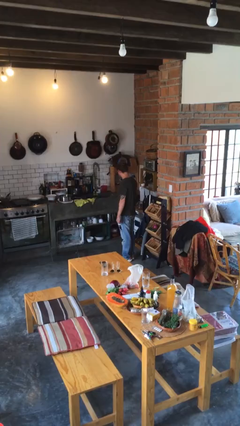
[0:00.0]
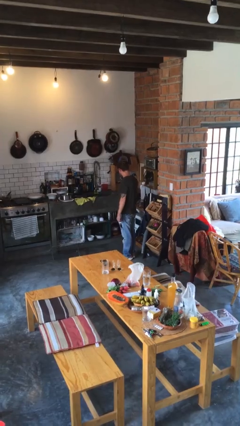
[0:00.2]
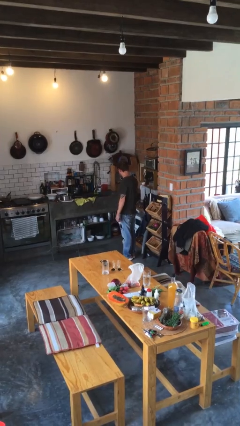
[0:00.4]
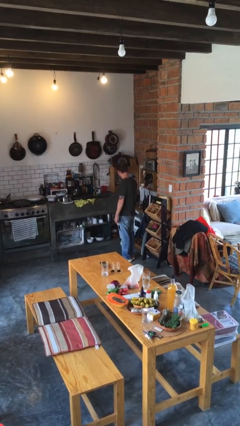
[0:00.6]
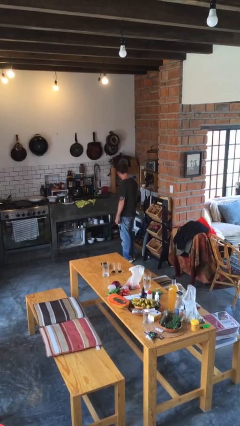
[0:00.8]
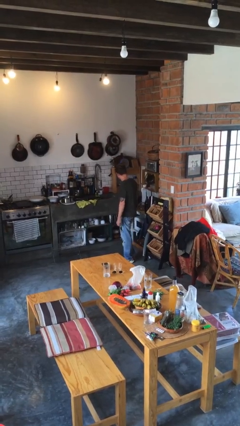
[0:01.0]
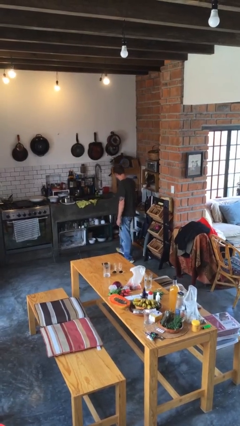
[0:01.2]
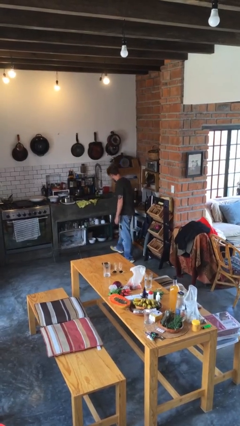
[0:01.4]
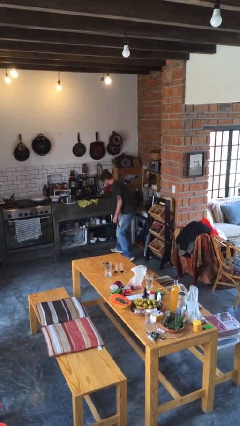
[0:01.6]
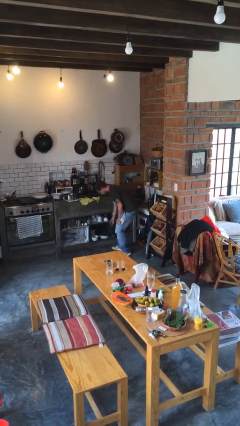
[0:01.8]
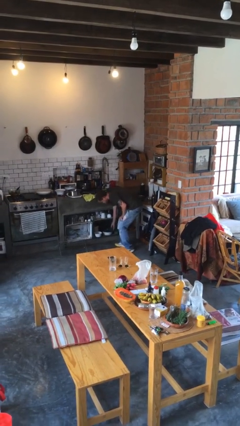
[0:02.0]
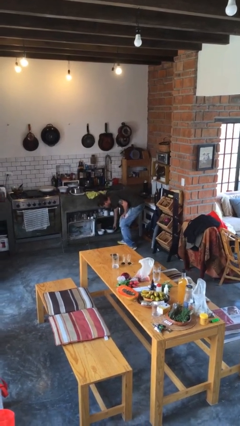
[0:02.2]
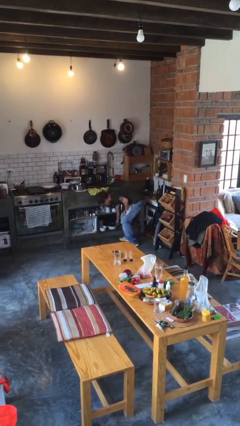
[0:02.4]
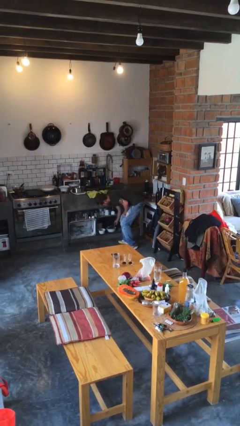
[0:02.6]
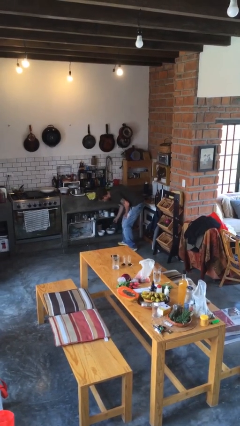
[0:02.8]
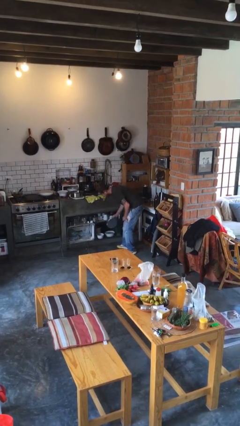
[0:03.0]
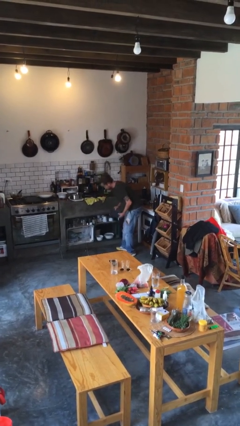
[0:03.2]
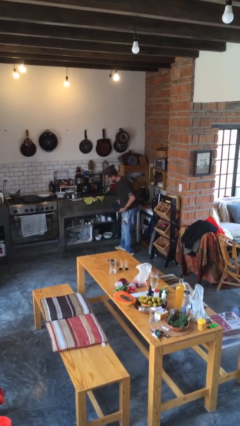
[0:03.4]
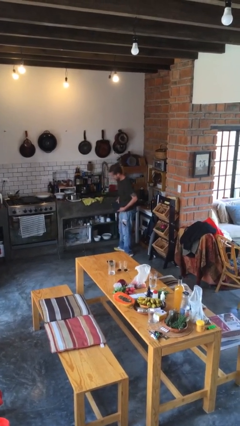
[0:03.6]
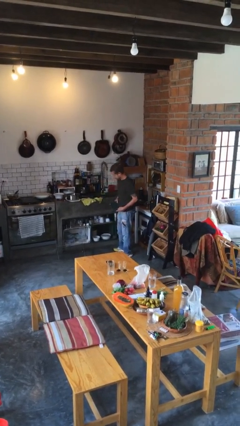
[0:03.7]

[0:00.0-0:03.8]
person picks up object from cabinet

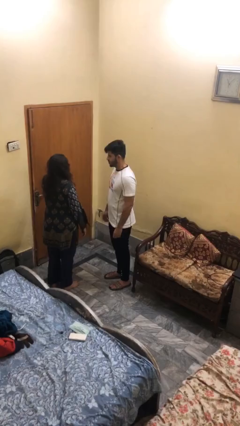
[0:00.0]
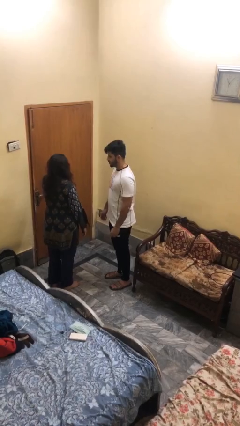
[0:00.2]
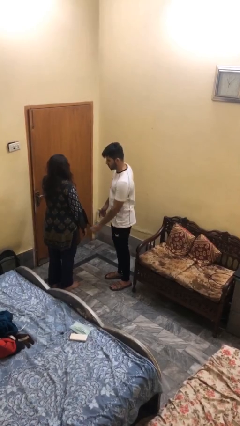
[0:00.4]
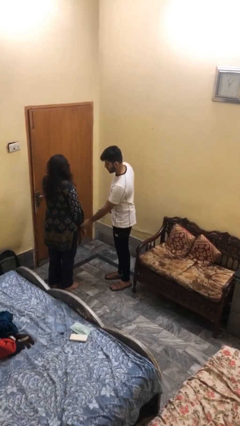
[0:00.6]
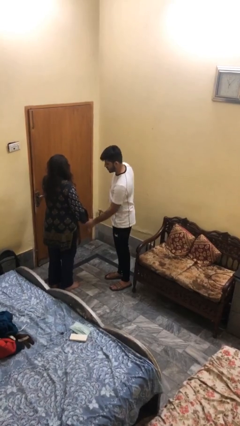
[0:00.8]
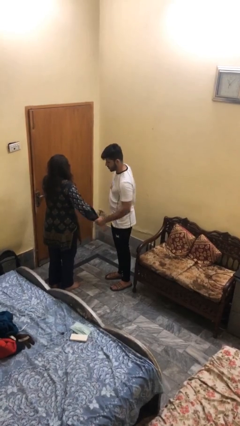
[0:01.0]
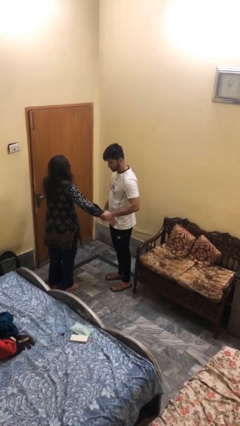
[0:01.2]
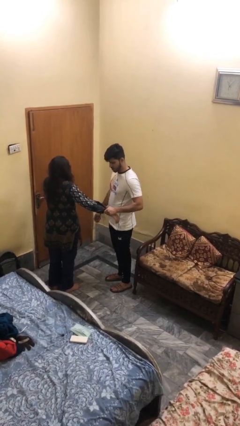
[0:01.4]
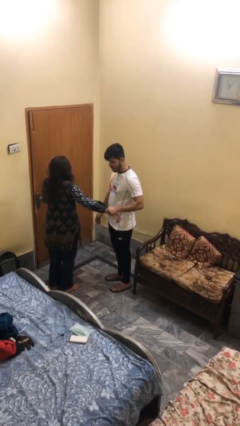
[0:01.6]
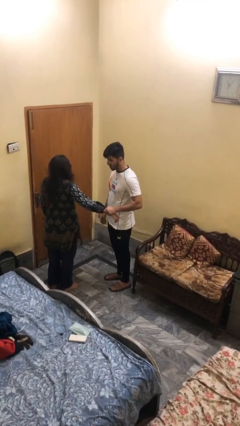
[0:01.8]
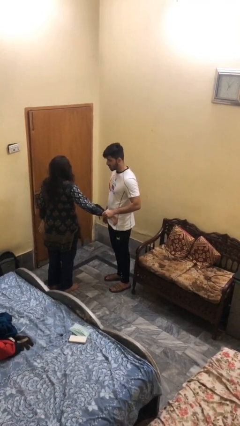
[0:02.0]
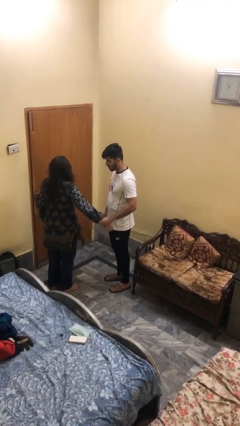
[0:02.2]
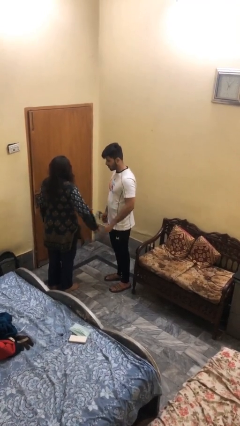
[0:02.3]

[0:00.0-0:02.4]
person grabs person by forearm

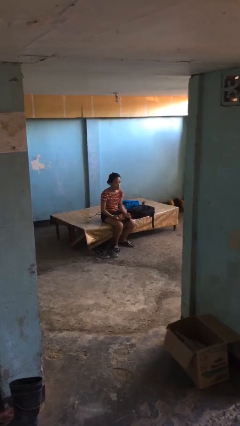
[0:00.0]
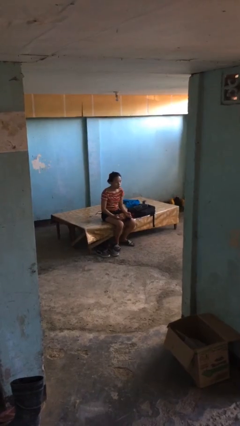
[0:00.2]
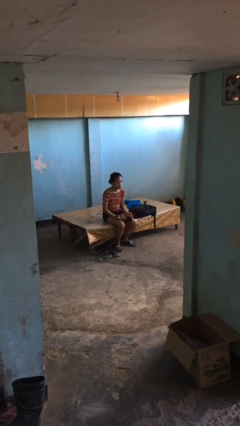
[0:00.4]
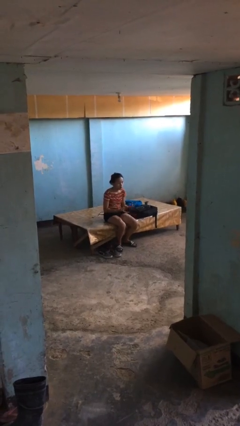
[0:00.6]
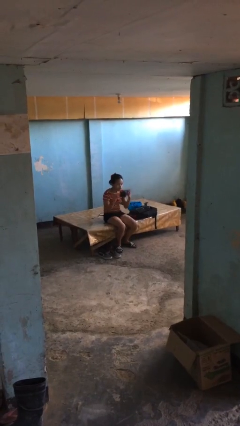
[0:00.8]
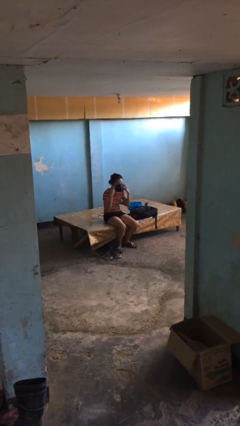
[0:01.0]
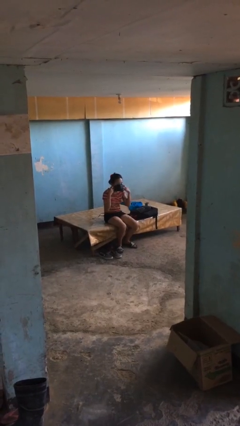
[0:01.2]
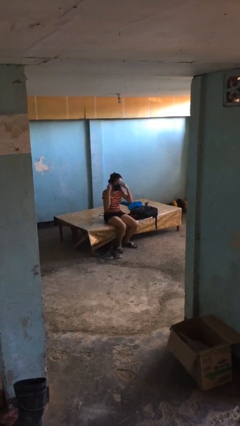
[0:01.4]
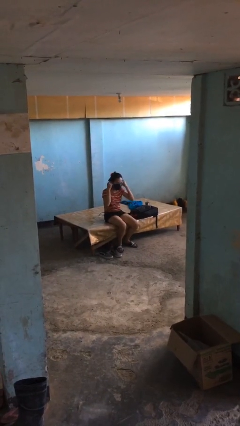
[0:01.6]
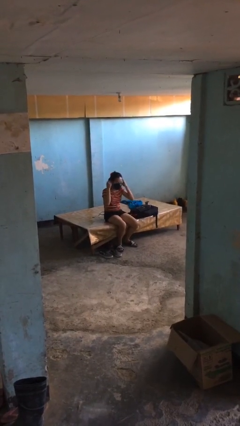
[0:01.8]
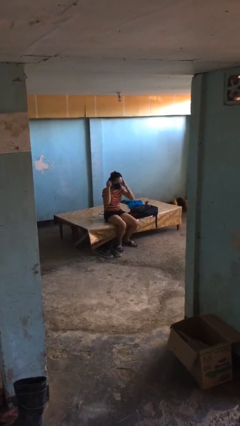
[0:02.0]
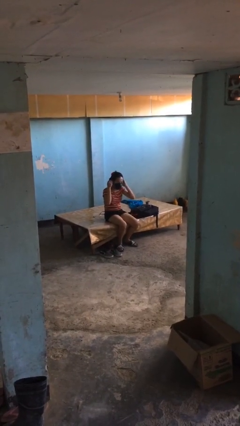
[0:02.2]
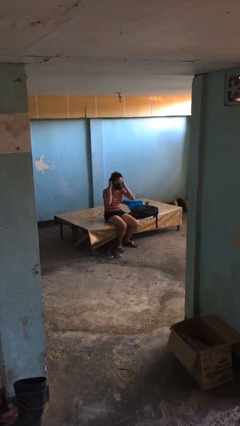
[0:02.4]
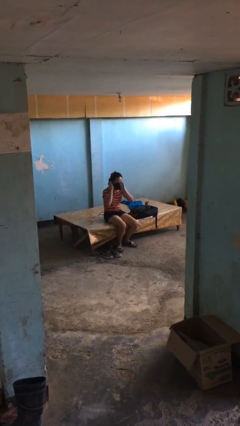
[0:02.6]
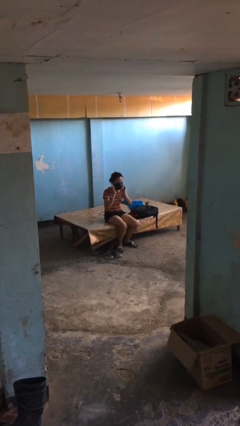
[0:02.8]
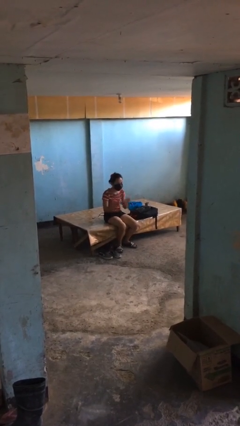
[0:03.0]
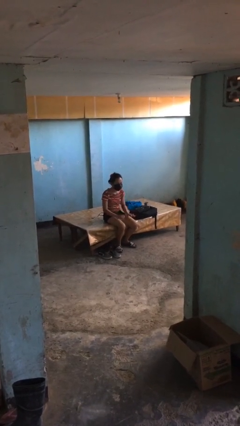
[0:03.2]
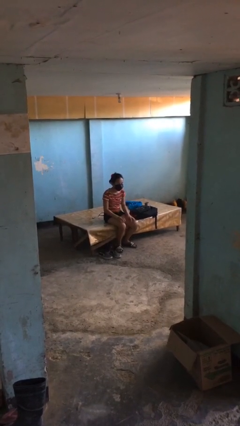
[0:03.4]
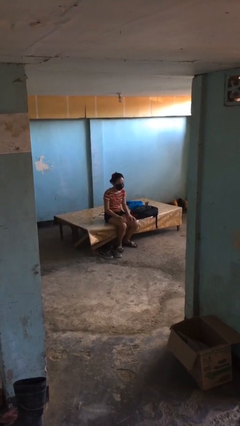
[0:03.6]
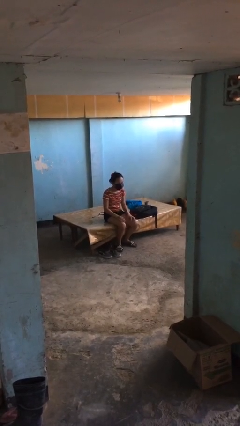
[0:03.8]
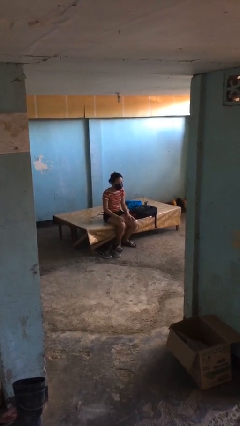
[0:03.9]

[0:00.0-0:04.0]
person puts on facemask

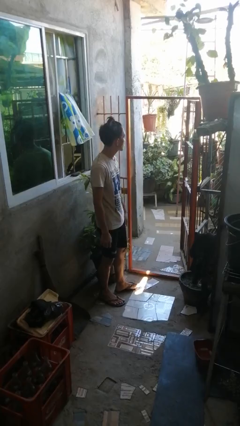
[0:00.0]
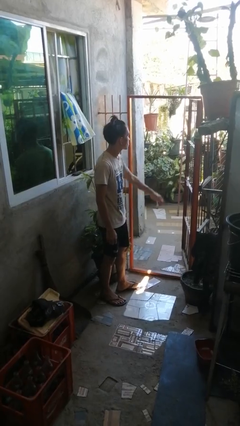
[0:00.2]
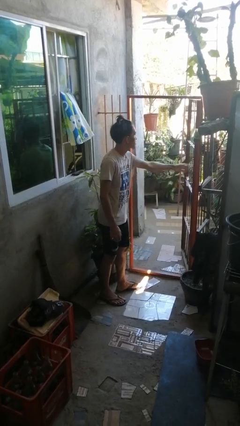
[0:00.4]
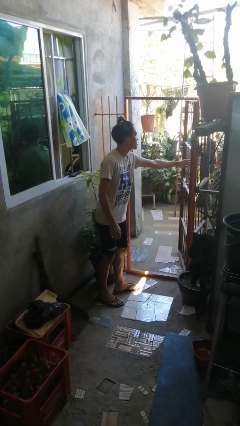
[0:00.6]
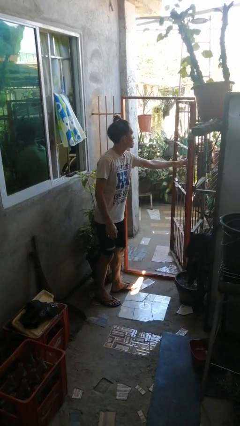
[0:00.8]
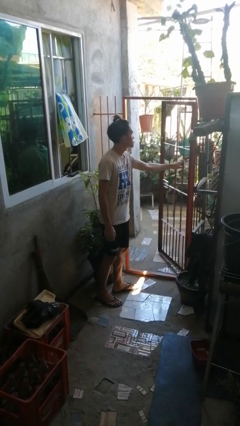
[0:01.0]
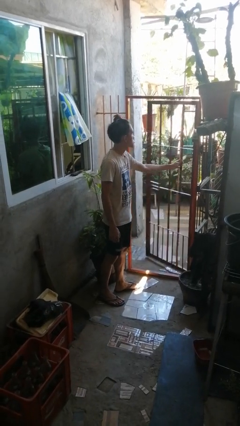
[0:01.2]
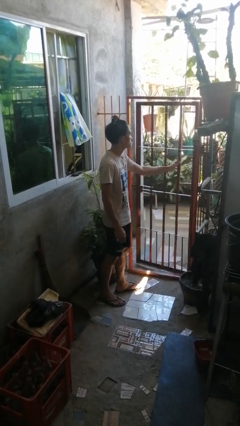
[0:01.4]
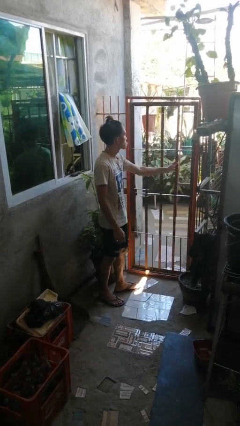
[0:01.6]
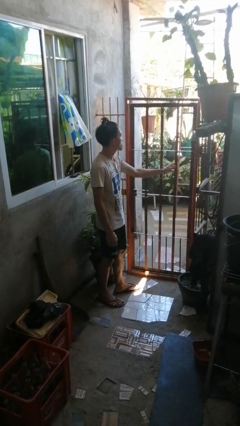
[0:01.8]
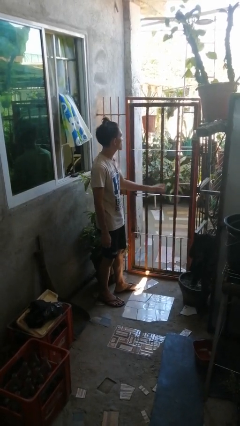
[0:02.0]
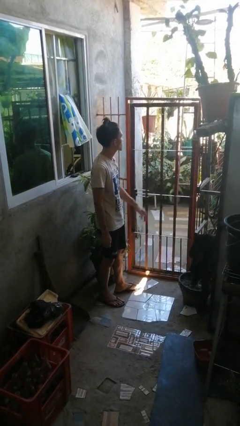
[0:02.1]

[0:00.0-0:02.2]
person closes gate

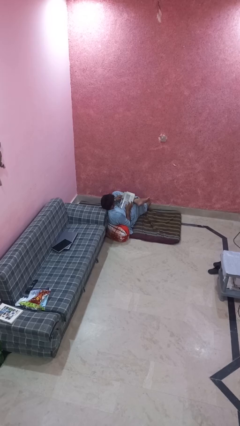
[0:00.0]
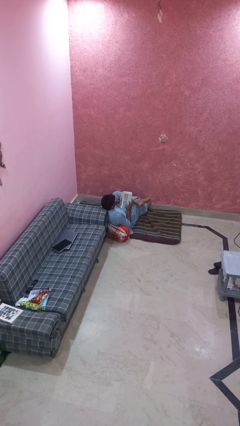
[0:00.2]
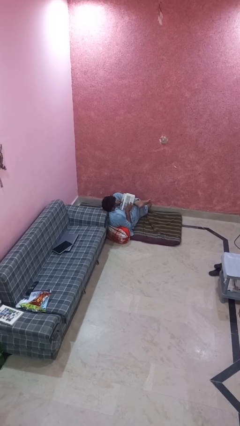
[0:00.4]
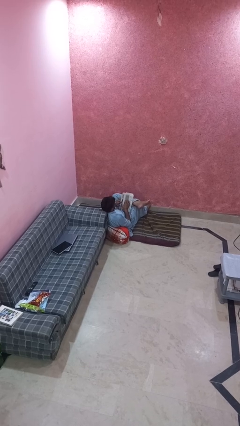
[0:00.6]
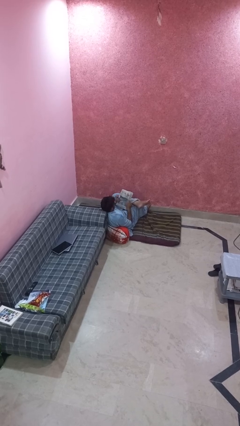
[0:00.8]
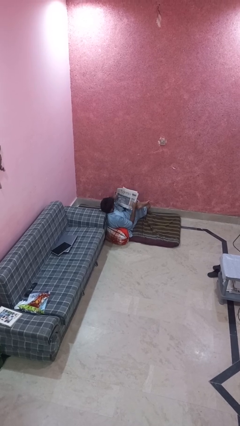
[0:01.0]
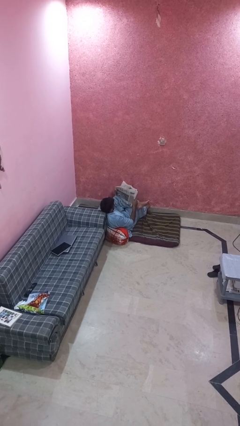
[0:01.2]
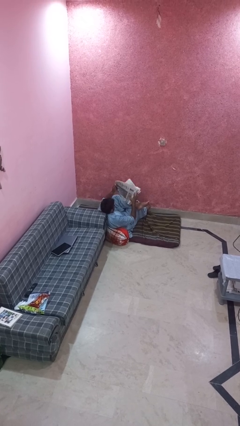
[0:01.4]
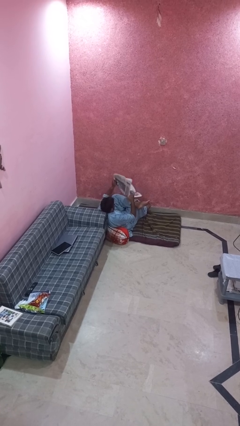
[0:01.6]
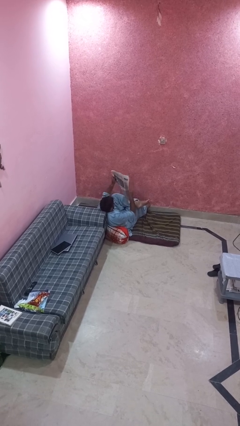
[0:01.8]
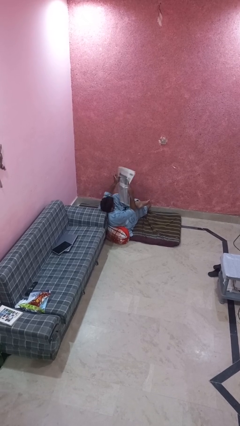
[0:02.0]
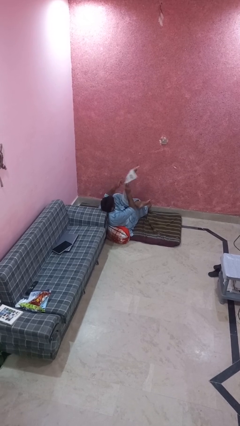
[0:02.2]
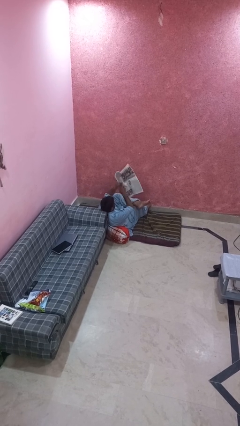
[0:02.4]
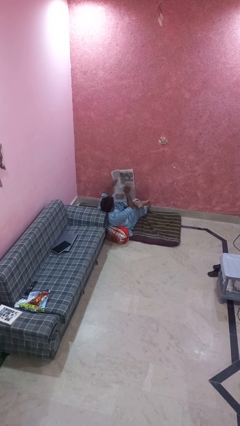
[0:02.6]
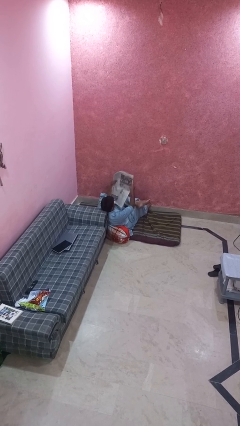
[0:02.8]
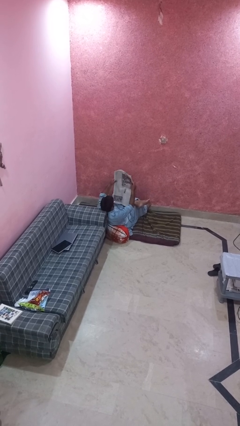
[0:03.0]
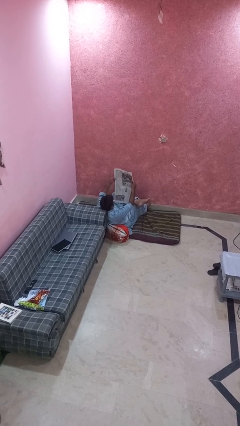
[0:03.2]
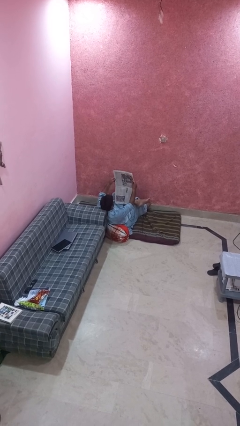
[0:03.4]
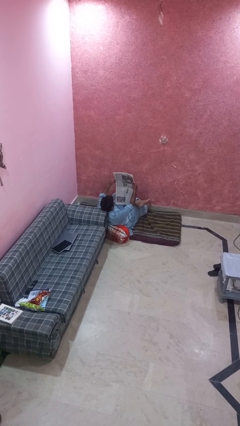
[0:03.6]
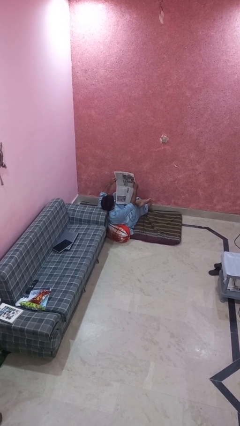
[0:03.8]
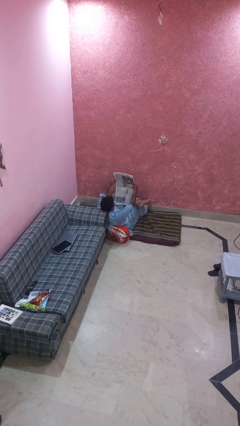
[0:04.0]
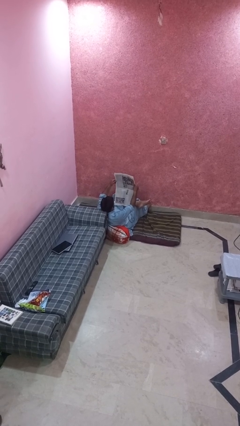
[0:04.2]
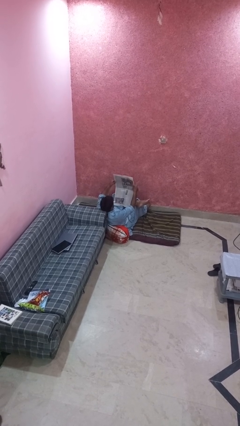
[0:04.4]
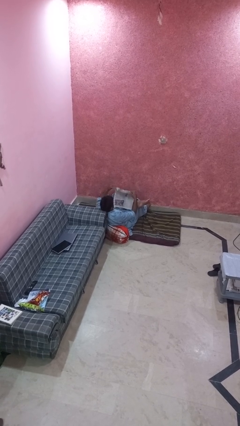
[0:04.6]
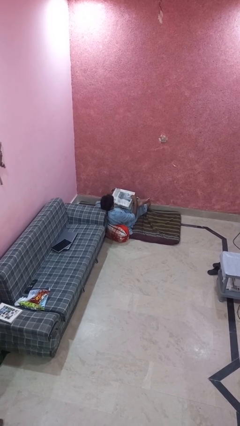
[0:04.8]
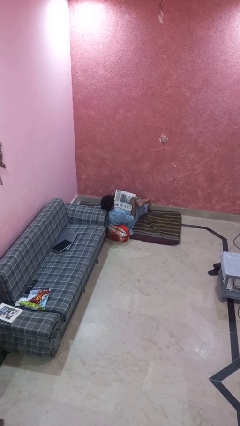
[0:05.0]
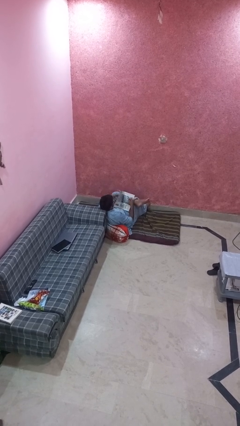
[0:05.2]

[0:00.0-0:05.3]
person reads newspaper
